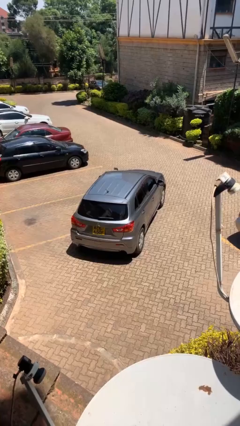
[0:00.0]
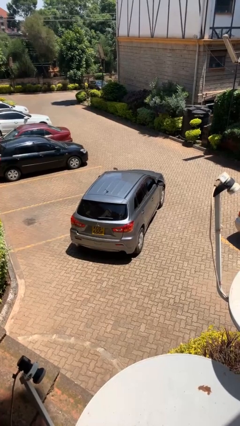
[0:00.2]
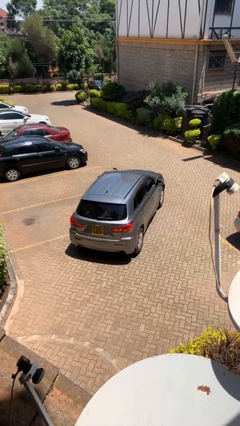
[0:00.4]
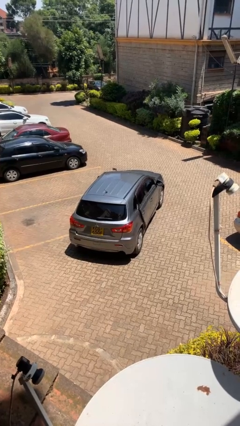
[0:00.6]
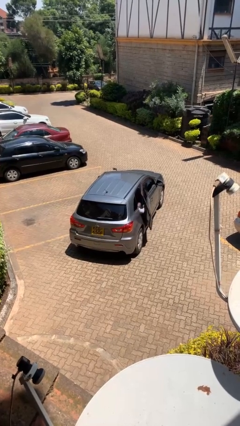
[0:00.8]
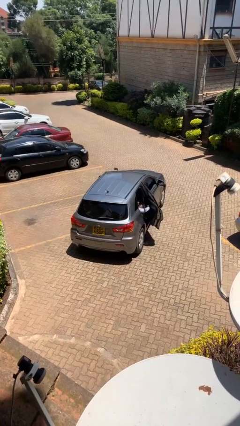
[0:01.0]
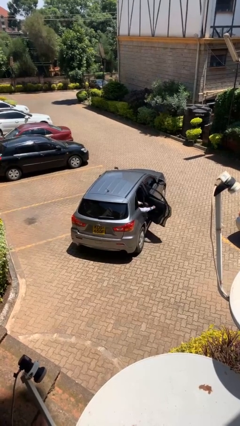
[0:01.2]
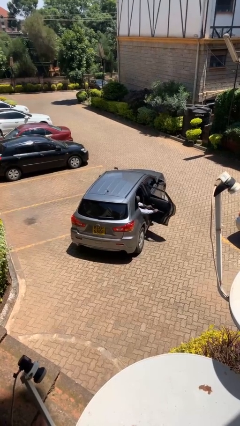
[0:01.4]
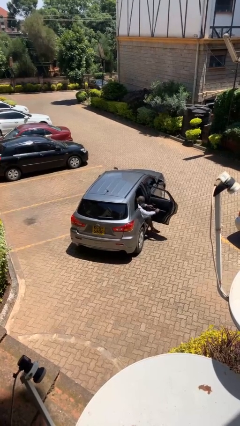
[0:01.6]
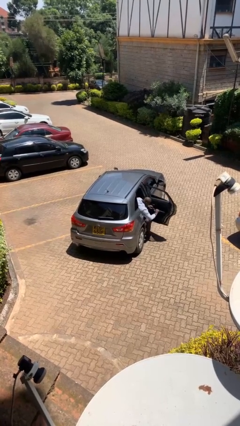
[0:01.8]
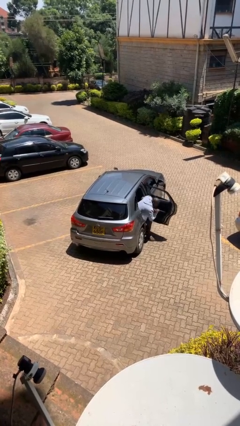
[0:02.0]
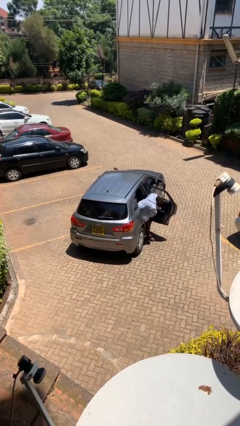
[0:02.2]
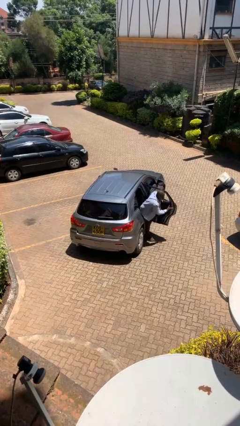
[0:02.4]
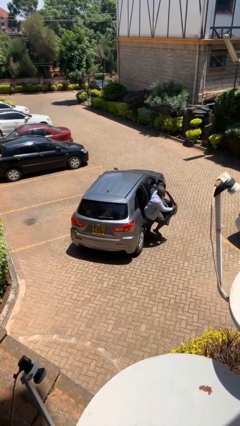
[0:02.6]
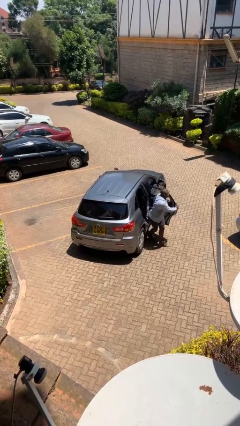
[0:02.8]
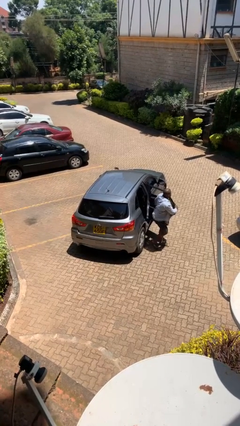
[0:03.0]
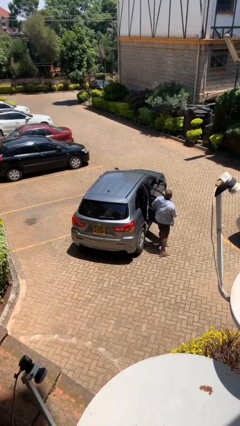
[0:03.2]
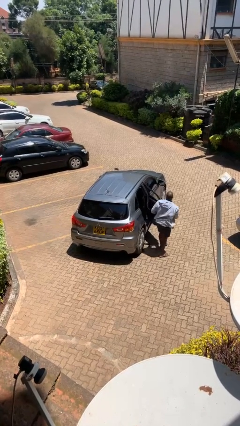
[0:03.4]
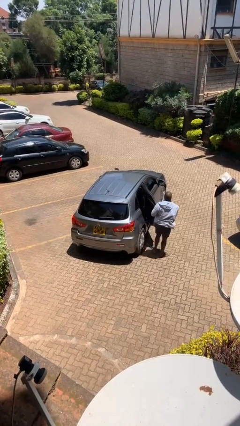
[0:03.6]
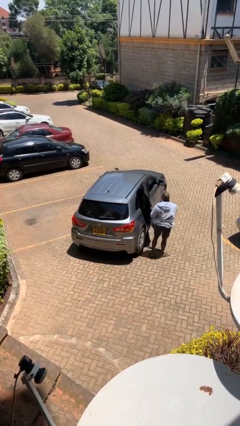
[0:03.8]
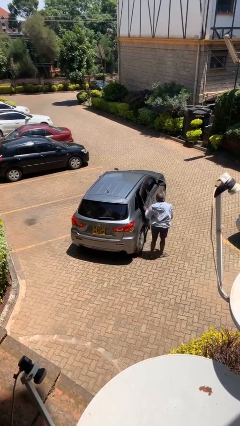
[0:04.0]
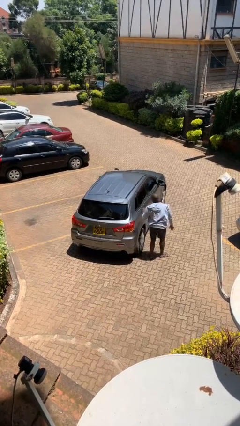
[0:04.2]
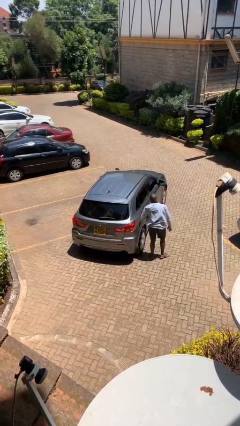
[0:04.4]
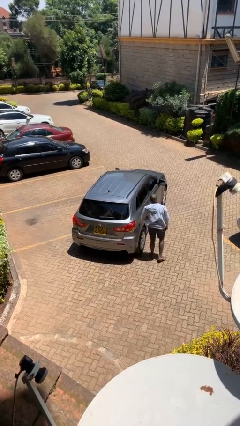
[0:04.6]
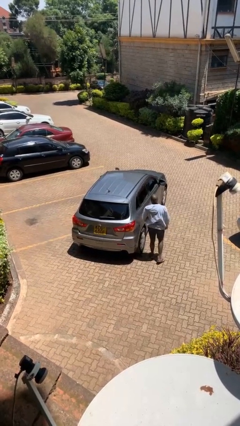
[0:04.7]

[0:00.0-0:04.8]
car drops off person

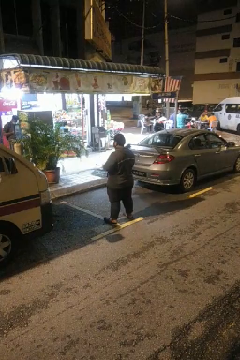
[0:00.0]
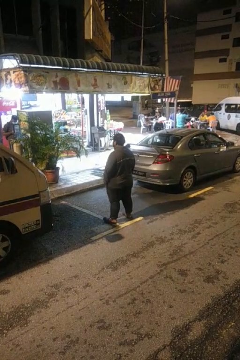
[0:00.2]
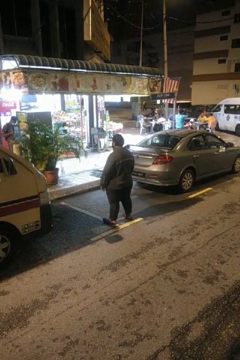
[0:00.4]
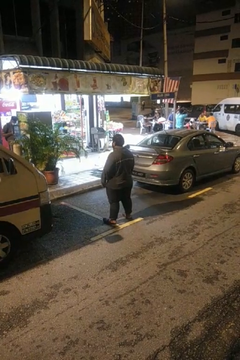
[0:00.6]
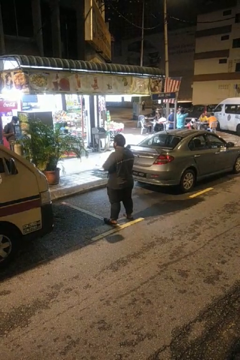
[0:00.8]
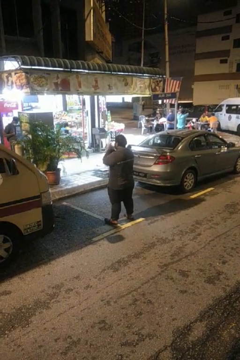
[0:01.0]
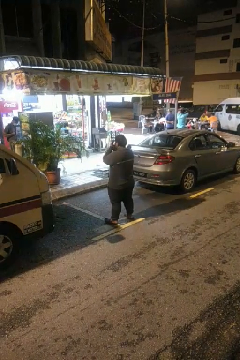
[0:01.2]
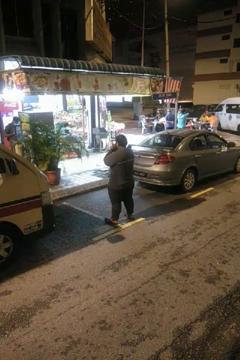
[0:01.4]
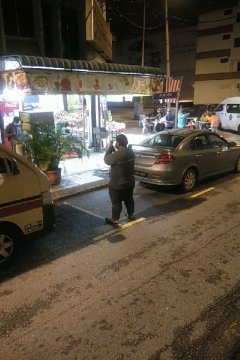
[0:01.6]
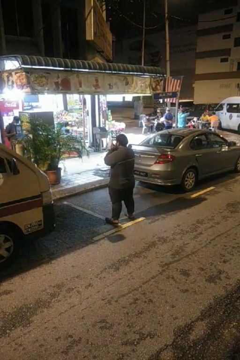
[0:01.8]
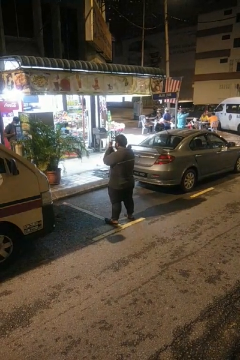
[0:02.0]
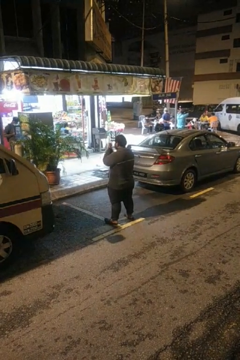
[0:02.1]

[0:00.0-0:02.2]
person blows into hands

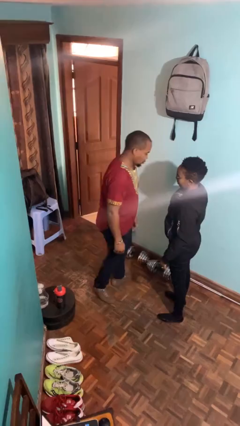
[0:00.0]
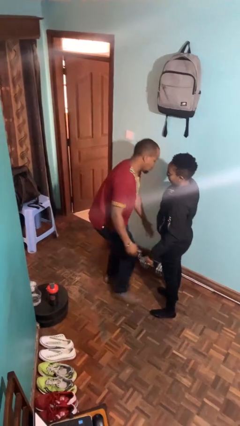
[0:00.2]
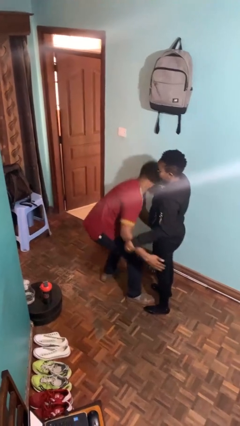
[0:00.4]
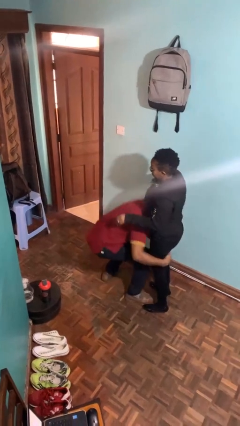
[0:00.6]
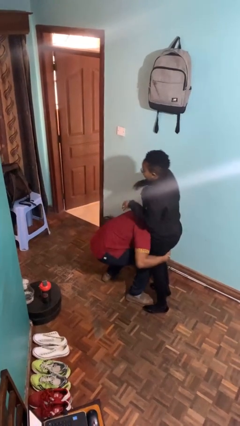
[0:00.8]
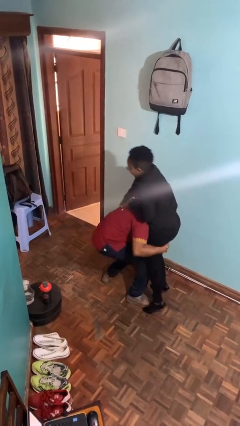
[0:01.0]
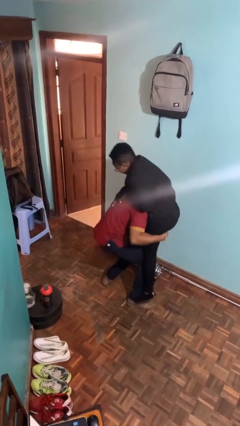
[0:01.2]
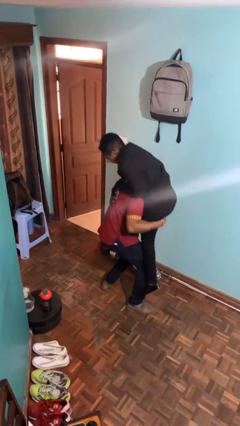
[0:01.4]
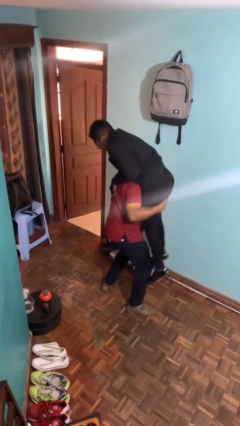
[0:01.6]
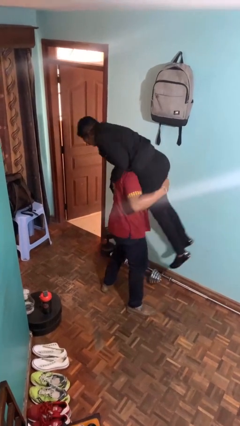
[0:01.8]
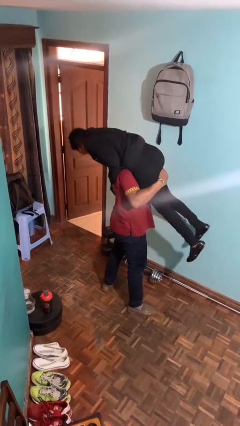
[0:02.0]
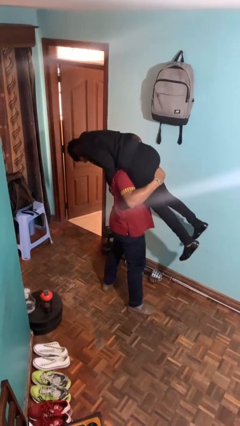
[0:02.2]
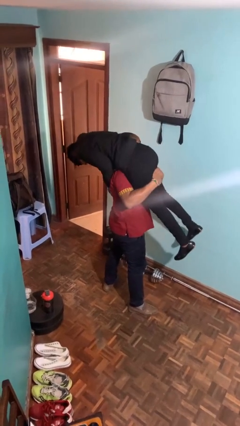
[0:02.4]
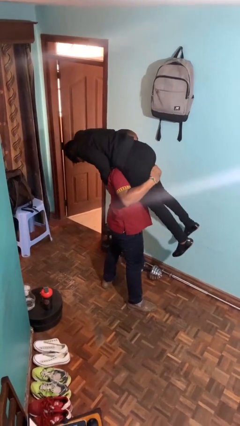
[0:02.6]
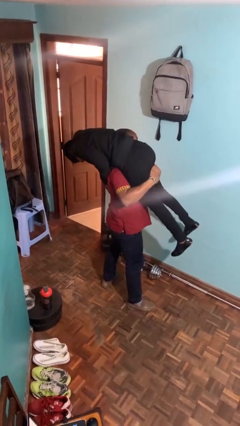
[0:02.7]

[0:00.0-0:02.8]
person carries person over shoulder

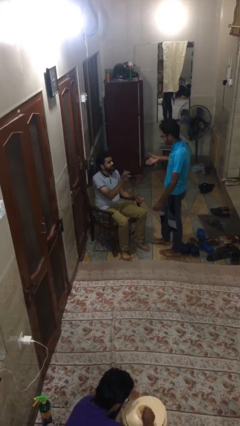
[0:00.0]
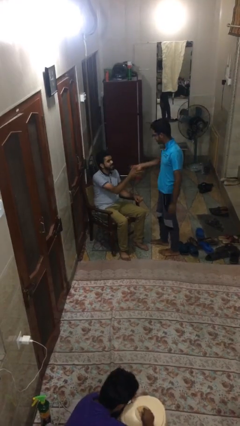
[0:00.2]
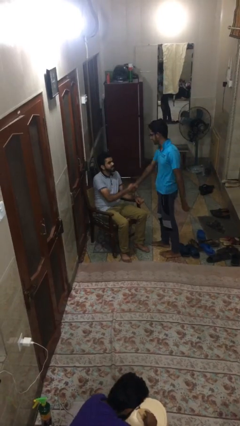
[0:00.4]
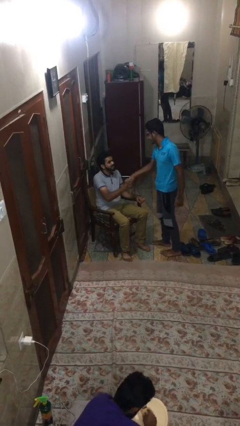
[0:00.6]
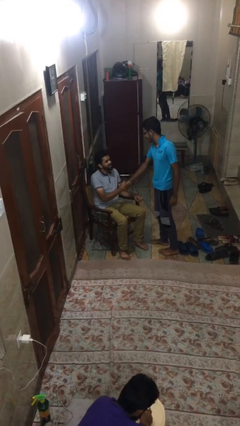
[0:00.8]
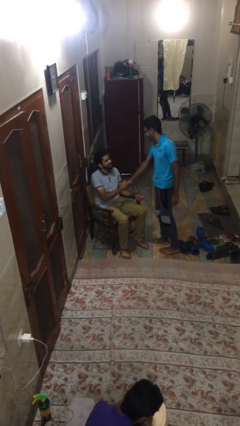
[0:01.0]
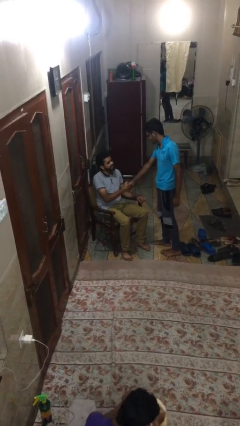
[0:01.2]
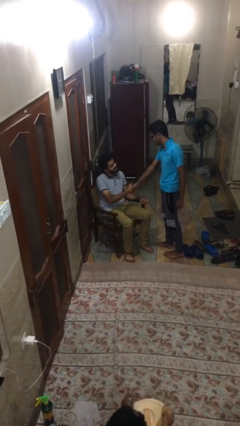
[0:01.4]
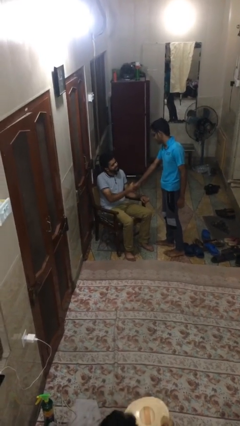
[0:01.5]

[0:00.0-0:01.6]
person shakes hand

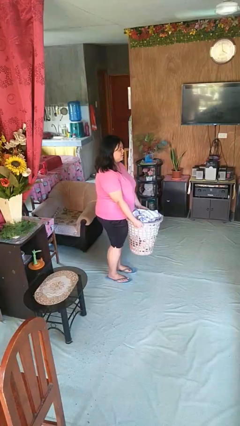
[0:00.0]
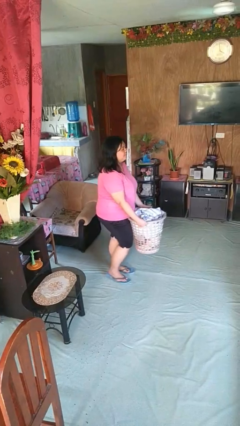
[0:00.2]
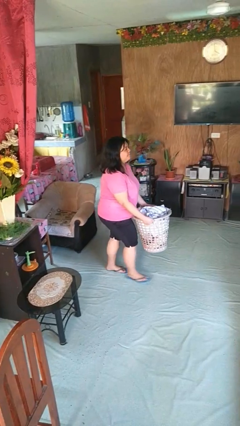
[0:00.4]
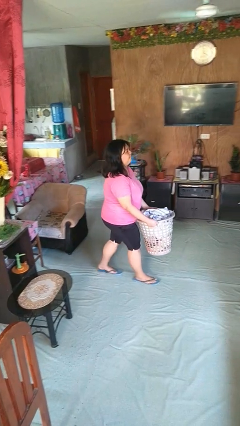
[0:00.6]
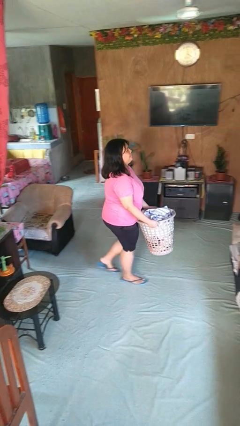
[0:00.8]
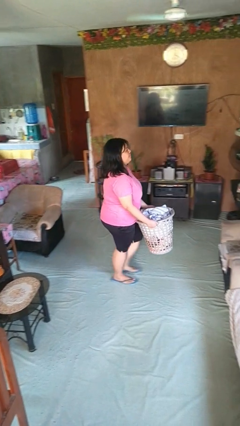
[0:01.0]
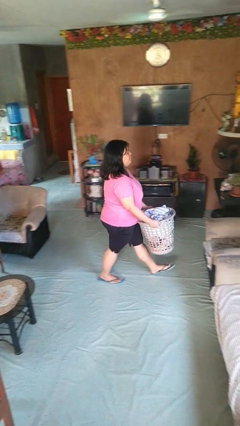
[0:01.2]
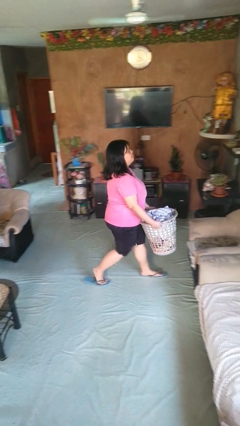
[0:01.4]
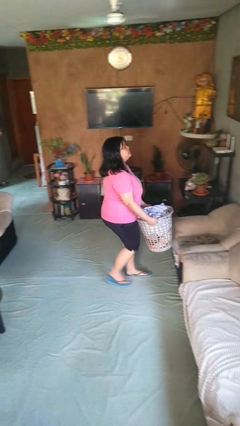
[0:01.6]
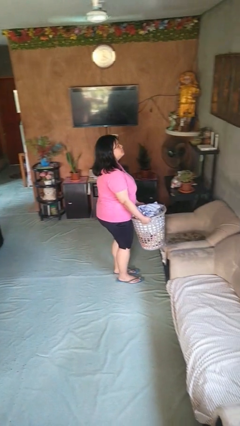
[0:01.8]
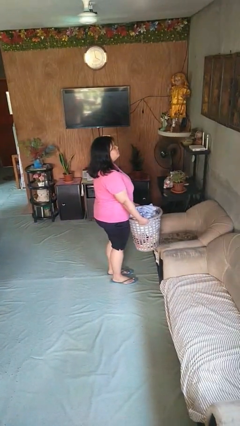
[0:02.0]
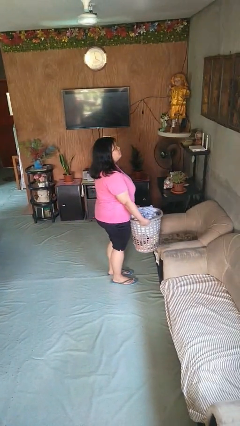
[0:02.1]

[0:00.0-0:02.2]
person carries laundry basket

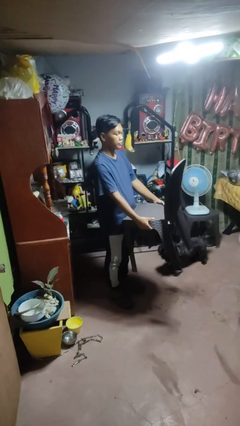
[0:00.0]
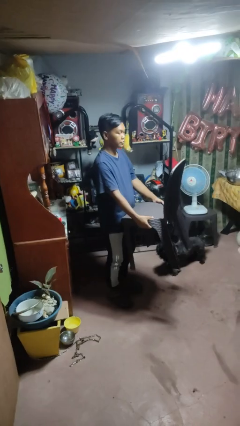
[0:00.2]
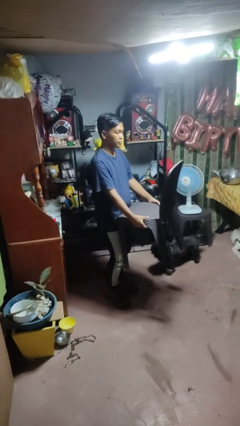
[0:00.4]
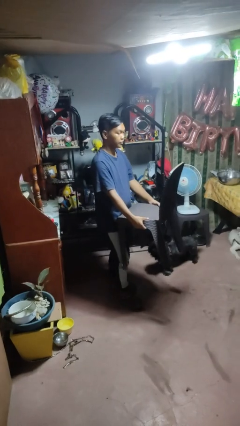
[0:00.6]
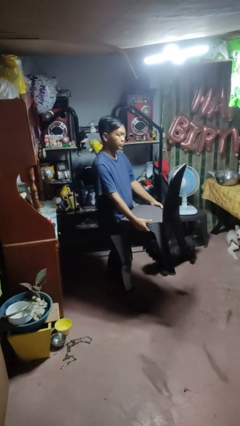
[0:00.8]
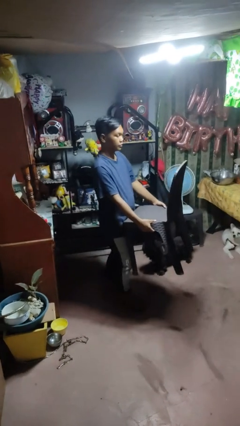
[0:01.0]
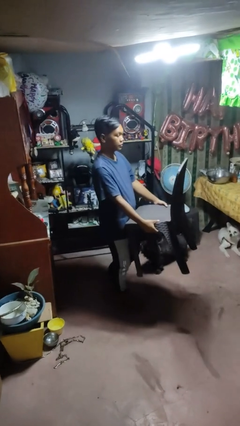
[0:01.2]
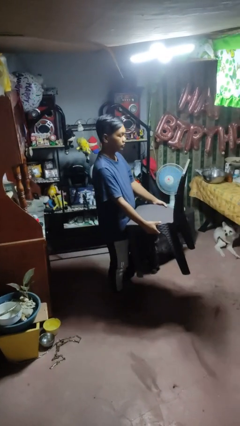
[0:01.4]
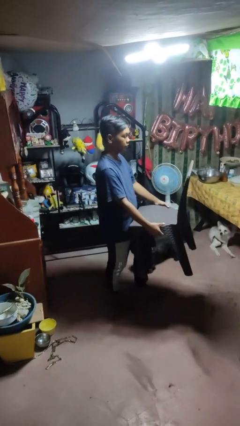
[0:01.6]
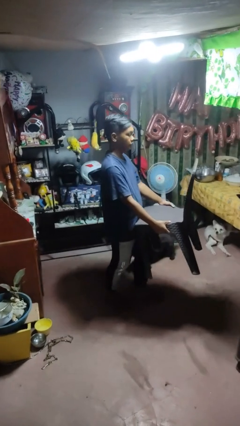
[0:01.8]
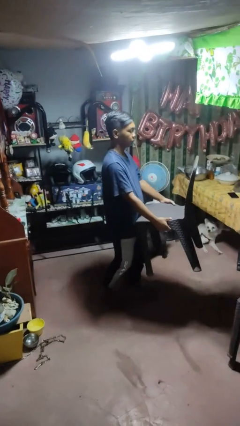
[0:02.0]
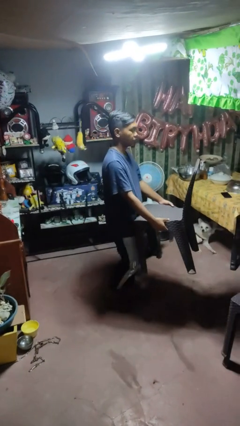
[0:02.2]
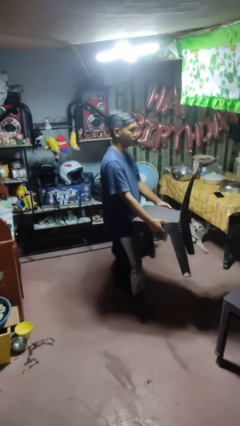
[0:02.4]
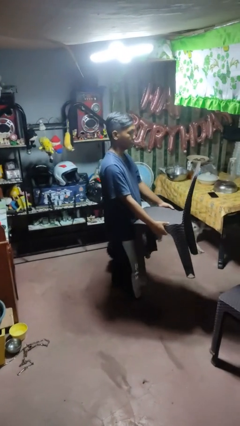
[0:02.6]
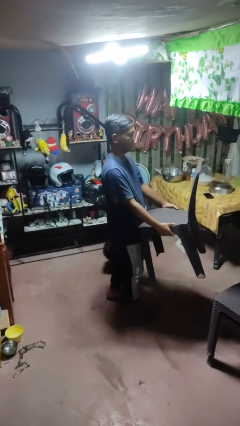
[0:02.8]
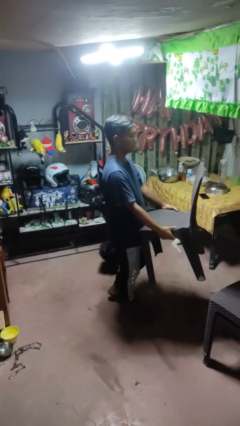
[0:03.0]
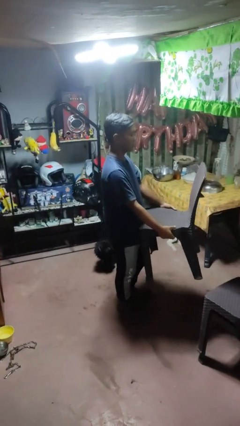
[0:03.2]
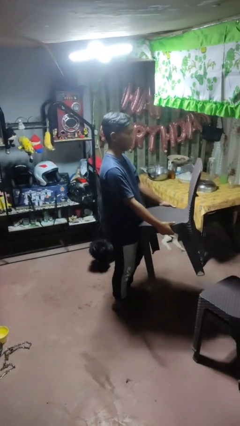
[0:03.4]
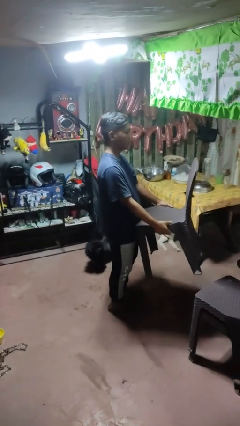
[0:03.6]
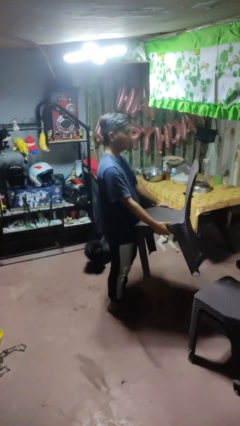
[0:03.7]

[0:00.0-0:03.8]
person carries furniture

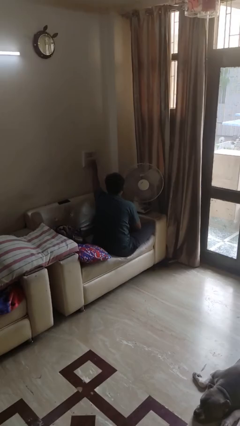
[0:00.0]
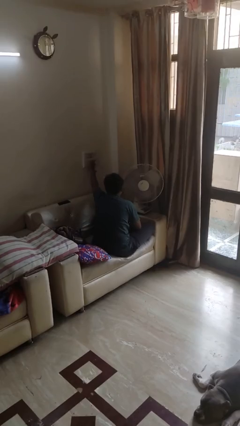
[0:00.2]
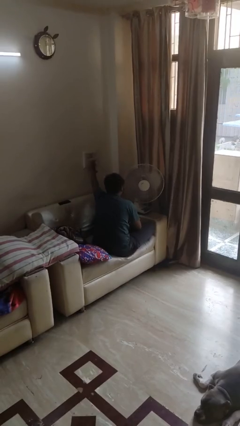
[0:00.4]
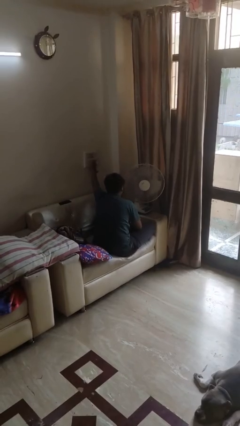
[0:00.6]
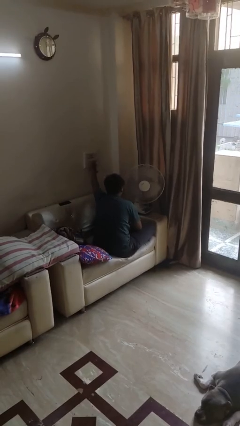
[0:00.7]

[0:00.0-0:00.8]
person turns on fan
